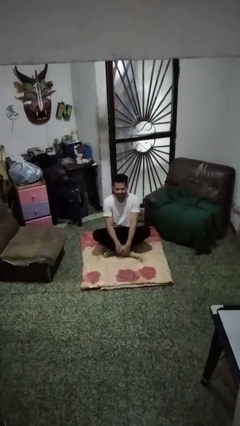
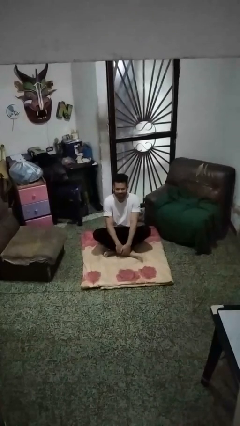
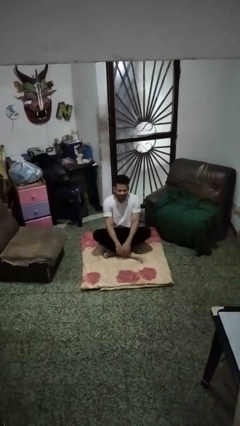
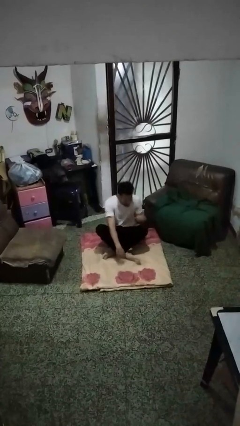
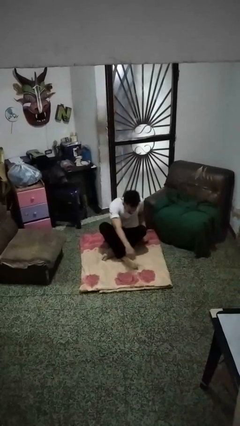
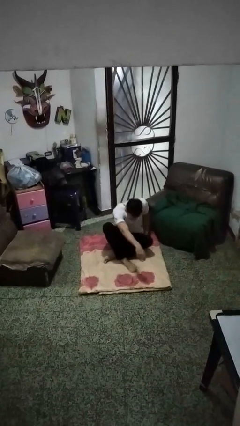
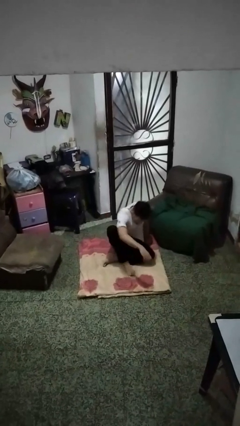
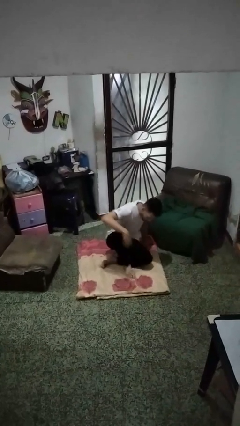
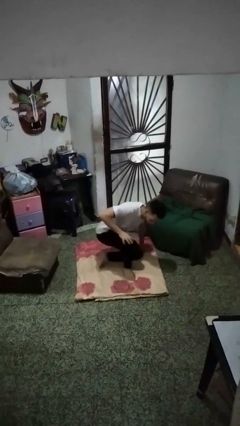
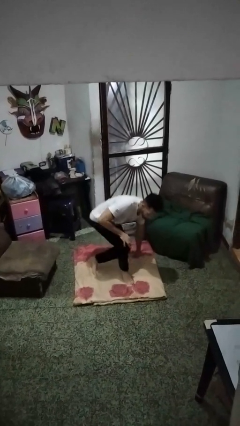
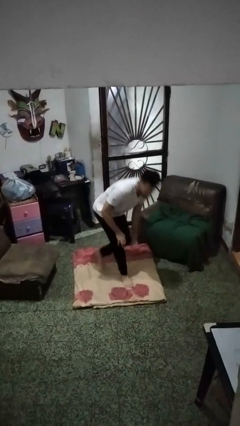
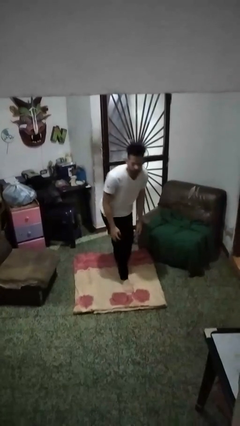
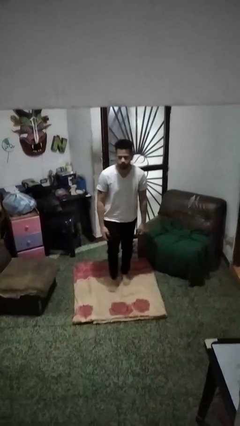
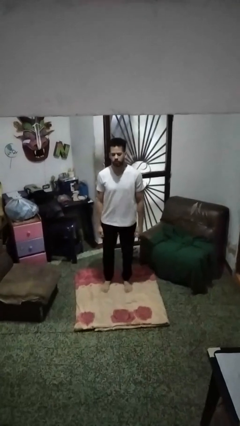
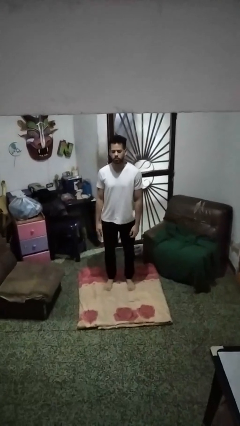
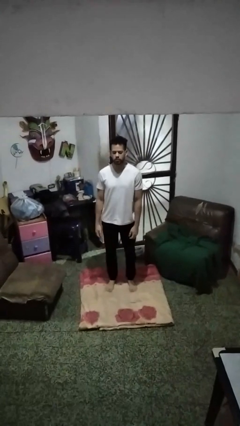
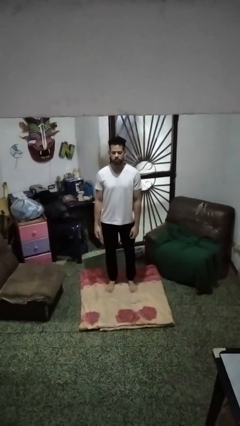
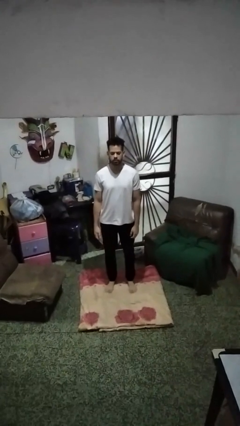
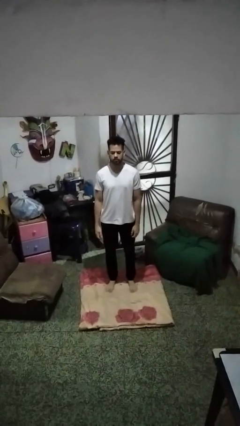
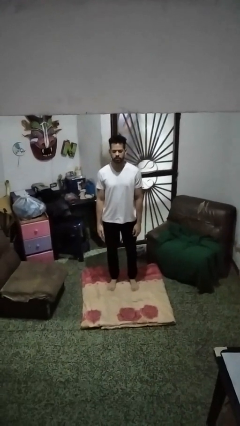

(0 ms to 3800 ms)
person stands up from floor

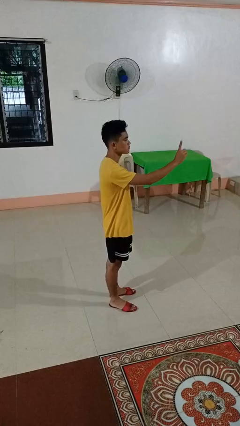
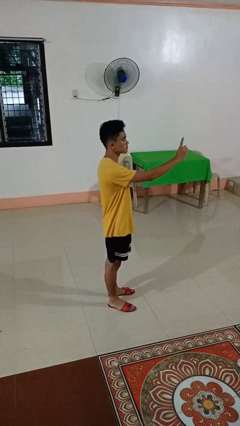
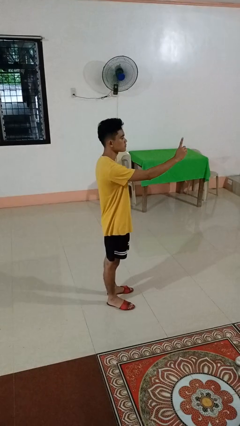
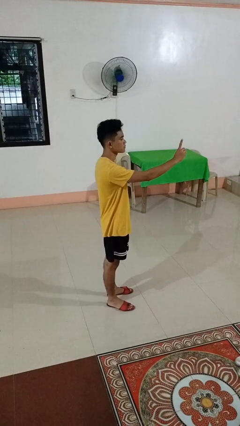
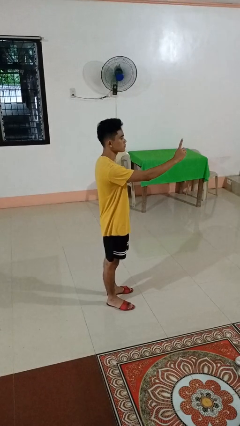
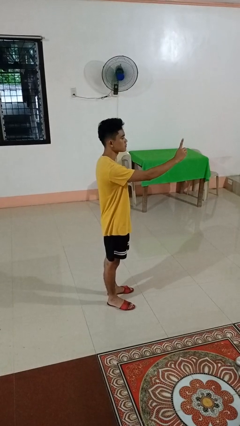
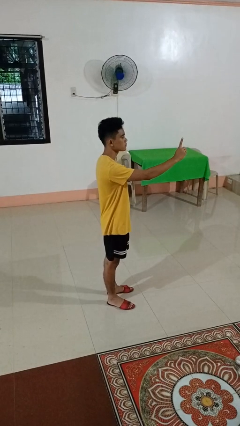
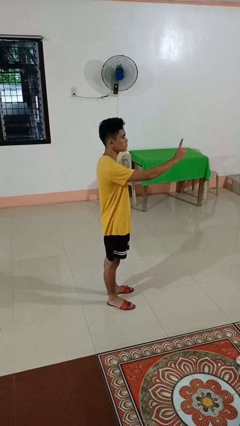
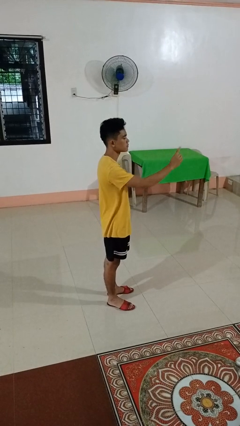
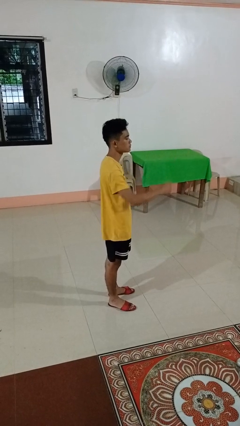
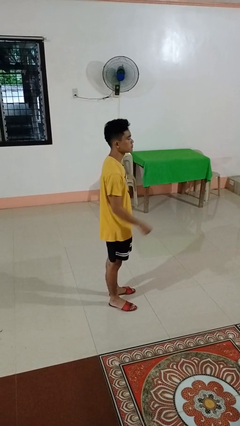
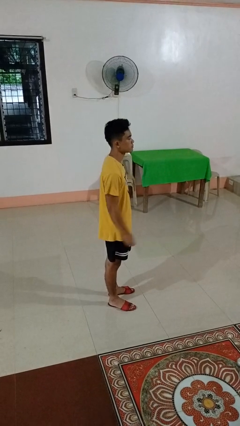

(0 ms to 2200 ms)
person gestures number one

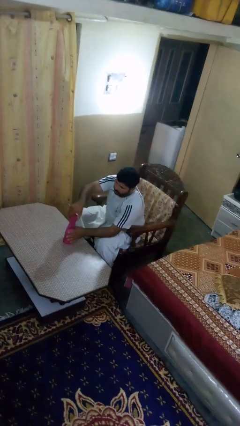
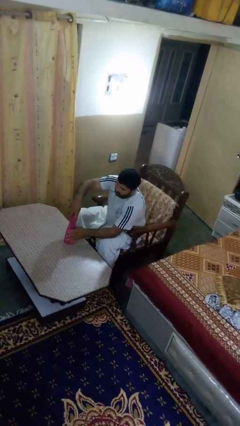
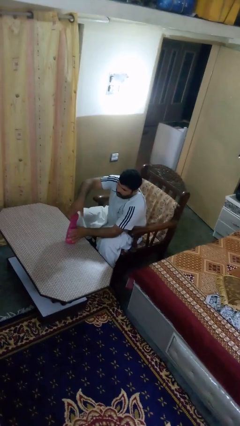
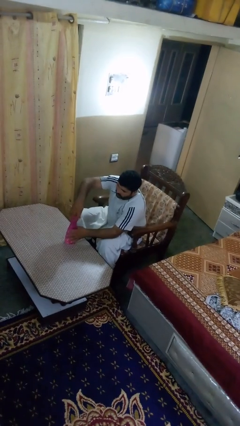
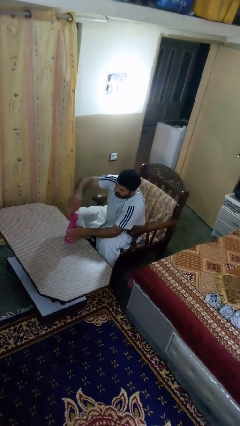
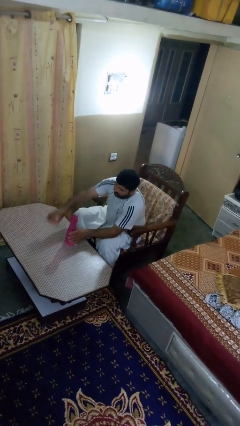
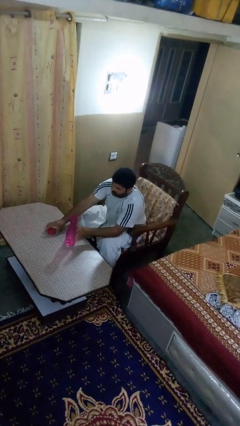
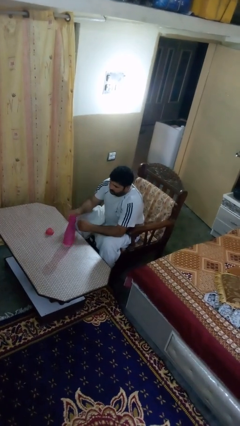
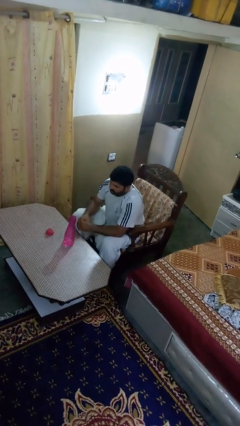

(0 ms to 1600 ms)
person unscrews lid from bottle

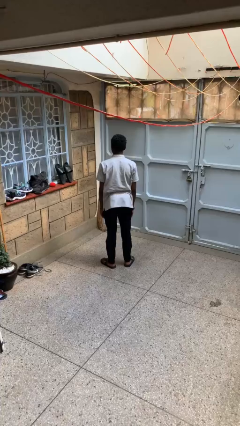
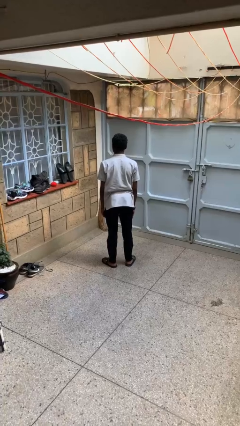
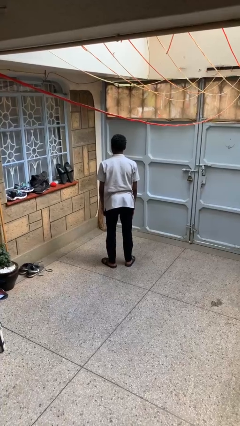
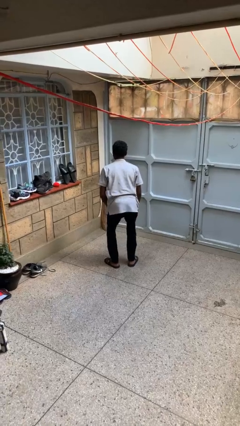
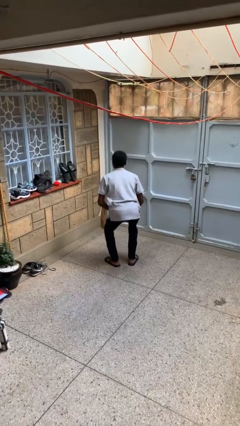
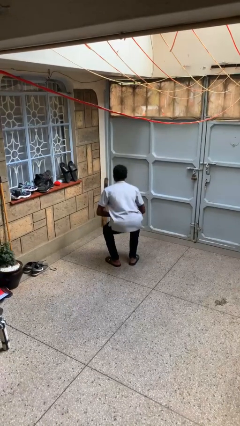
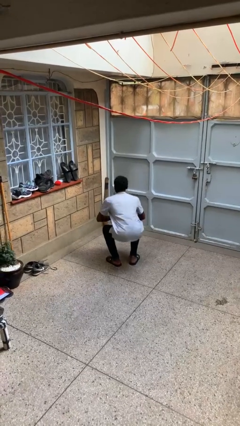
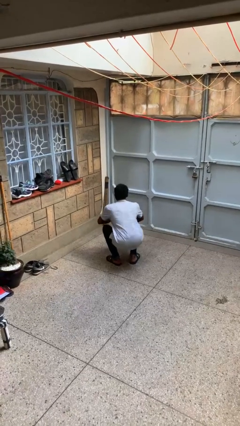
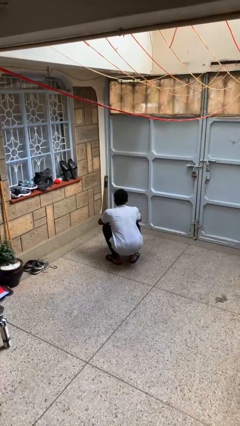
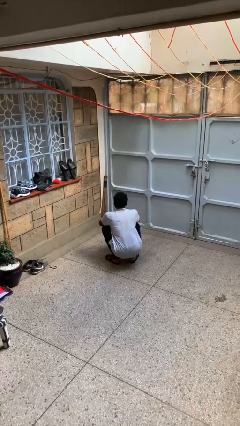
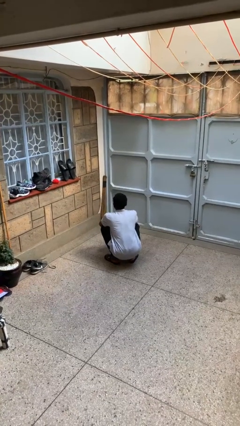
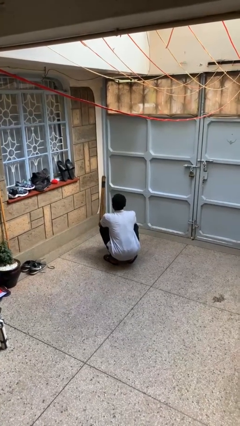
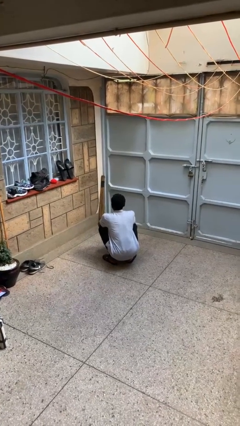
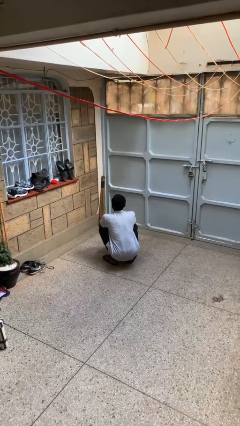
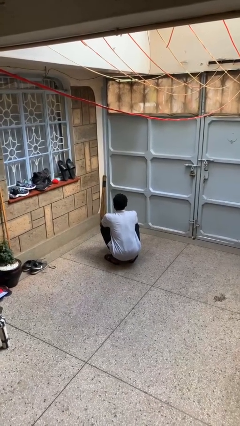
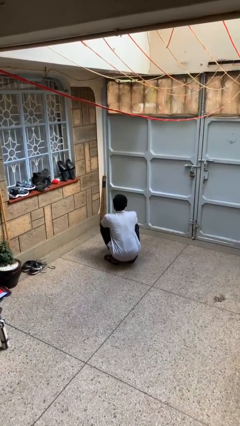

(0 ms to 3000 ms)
person squats

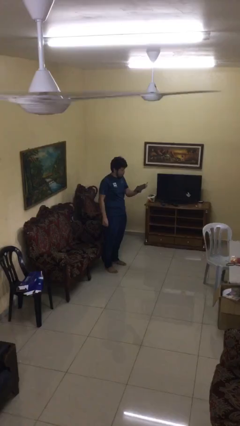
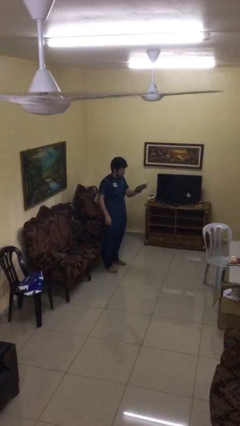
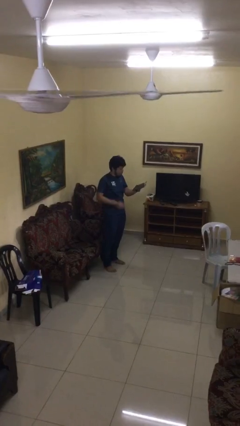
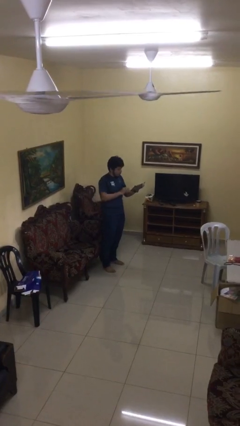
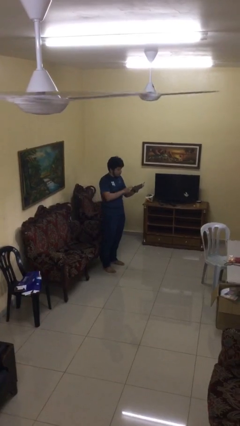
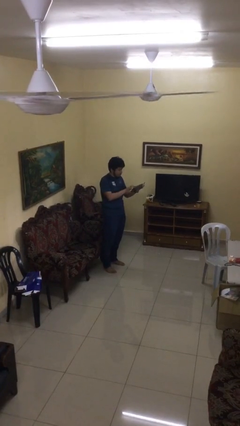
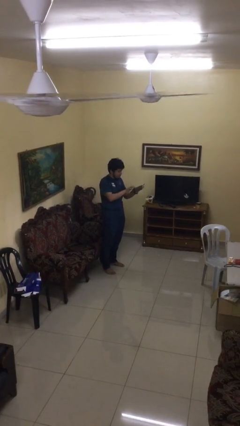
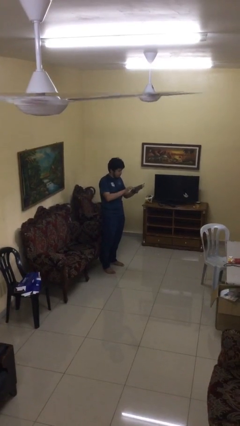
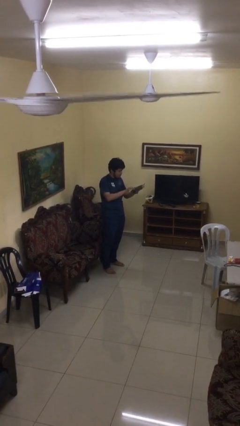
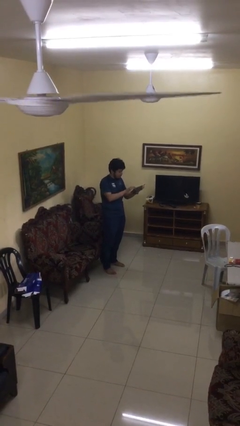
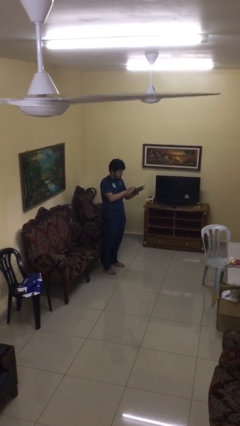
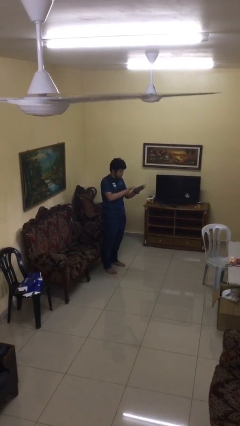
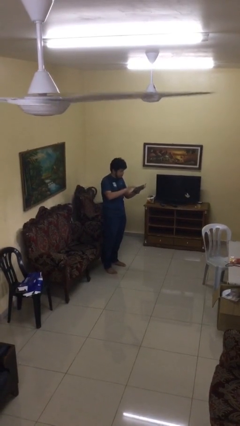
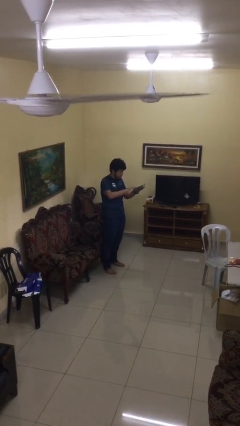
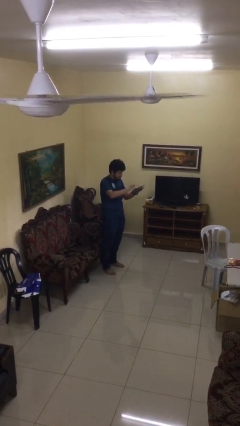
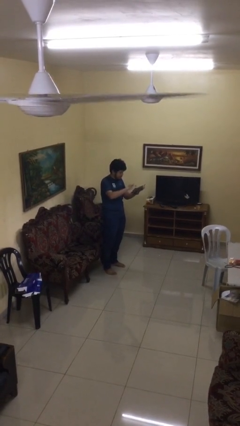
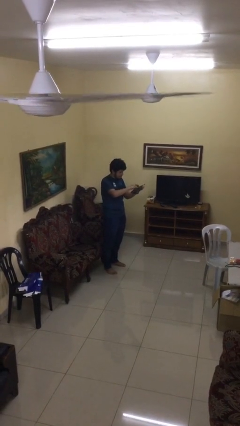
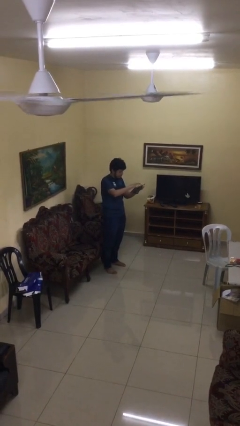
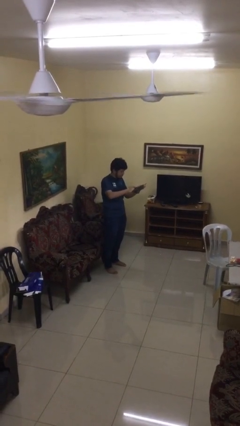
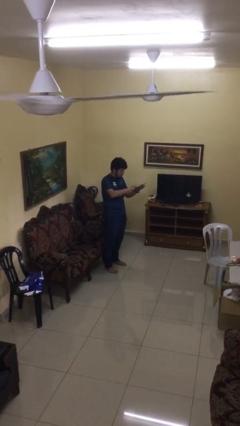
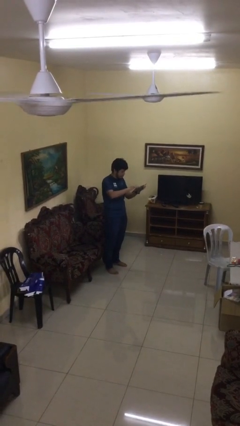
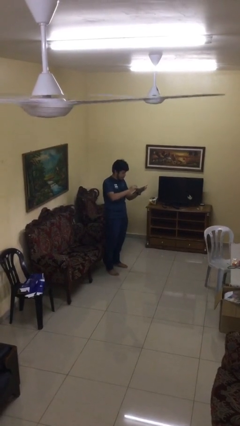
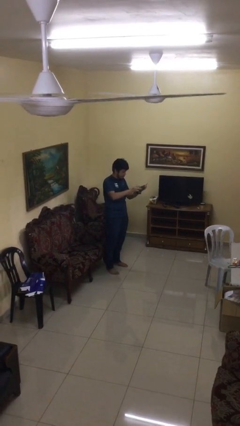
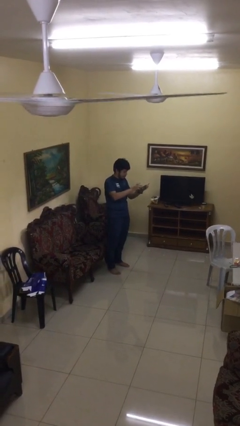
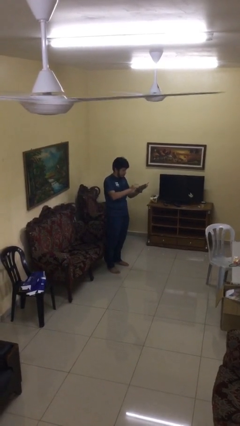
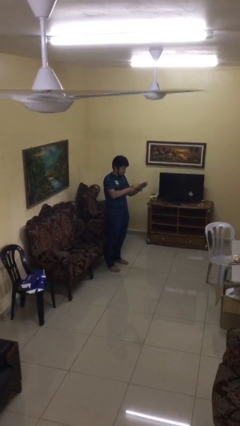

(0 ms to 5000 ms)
person interacts with tablet

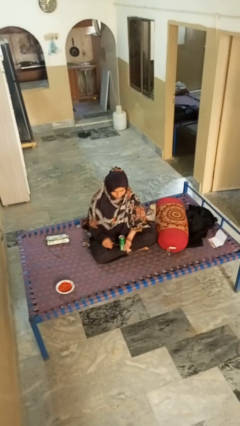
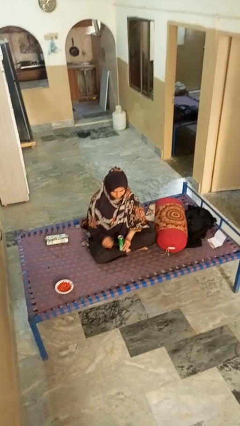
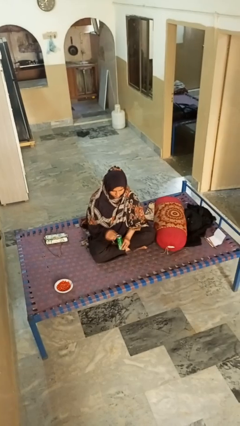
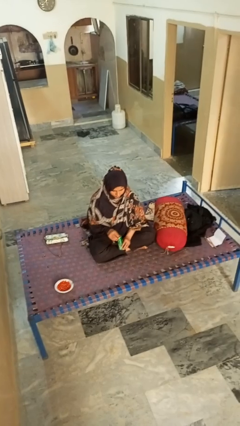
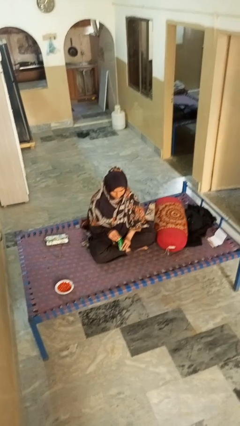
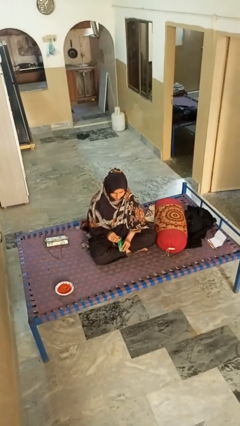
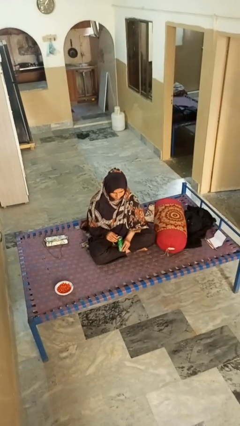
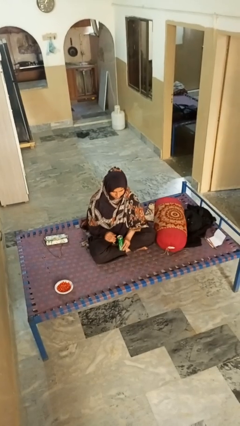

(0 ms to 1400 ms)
person opens can with can opener
